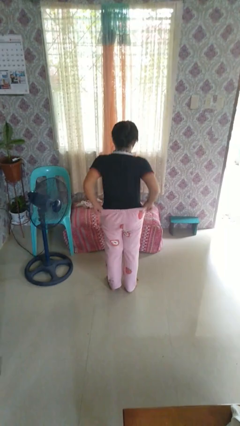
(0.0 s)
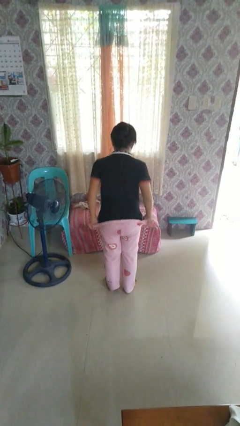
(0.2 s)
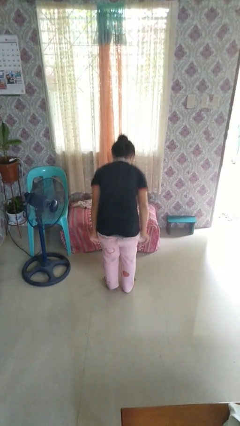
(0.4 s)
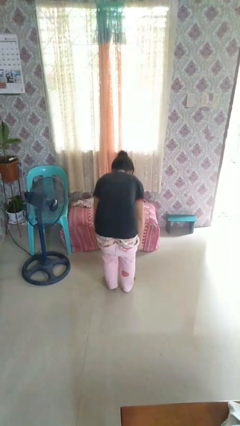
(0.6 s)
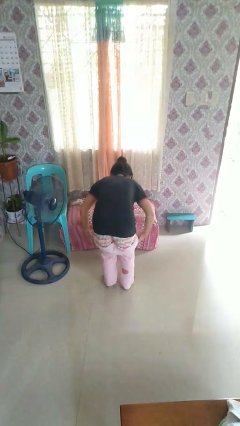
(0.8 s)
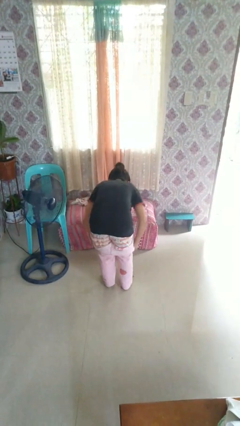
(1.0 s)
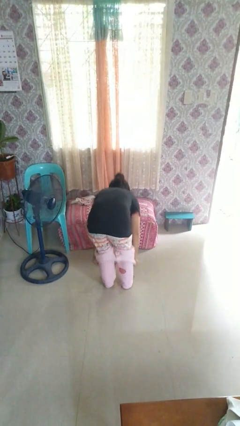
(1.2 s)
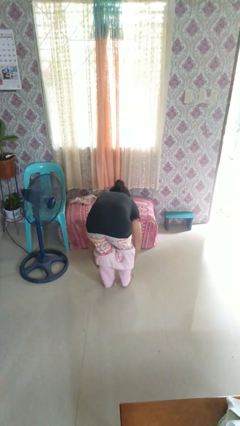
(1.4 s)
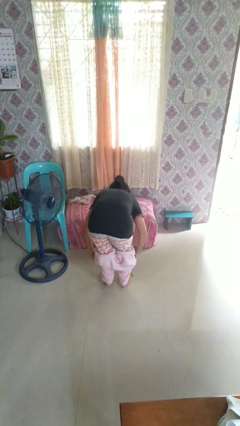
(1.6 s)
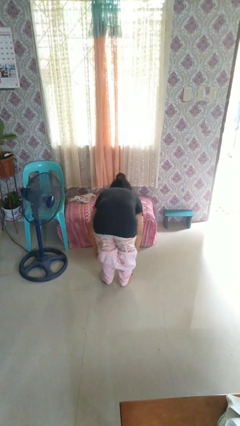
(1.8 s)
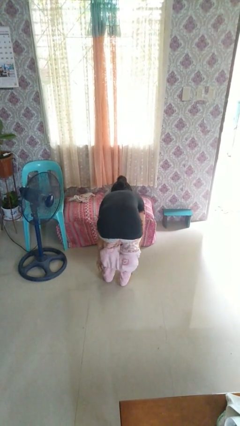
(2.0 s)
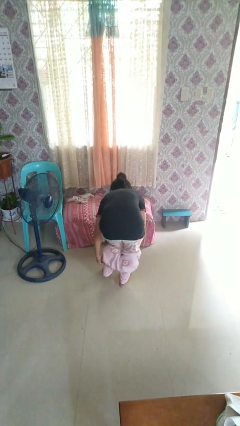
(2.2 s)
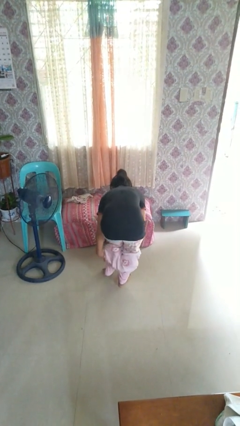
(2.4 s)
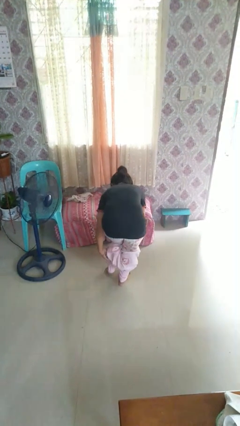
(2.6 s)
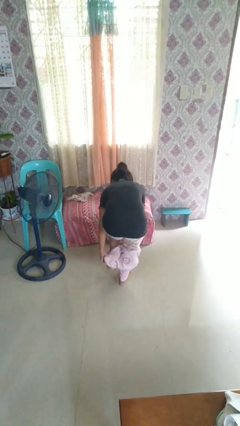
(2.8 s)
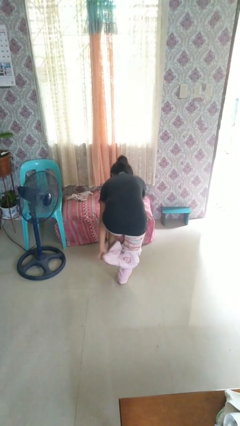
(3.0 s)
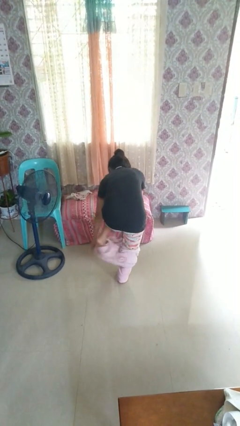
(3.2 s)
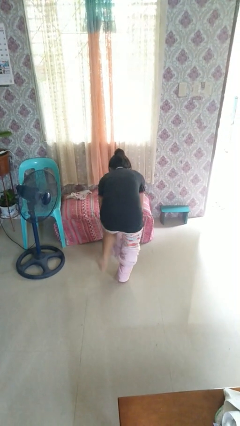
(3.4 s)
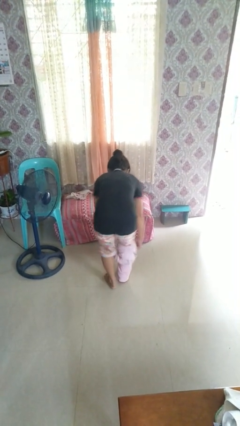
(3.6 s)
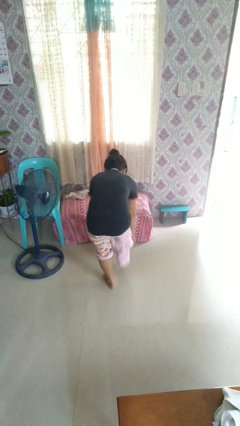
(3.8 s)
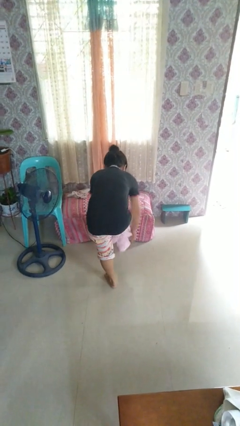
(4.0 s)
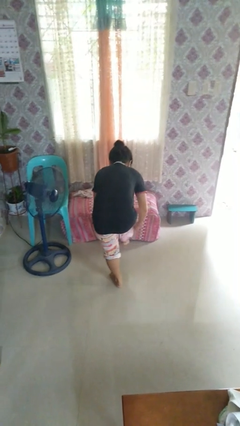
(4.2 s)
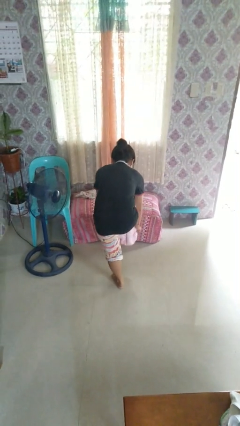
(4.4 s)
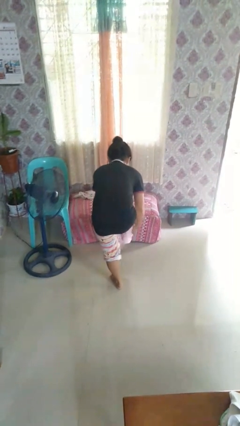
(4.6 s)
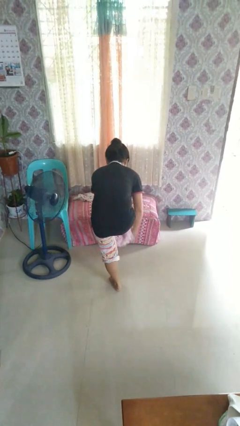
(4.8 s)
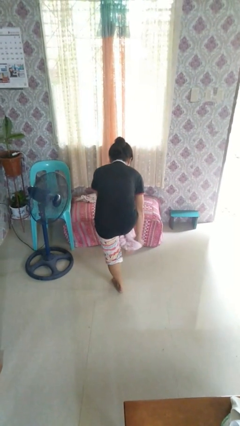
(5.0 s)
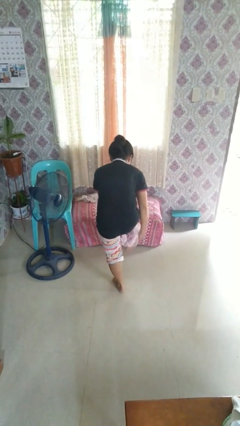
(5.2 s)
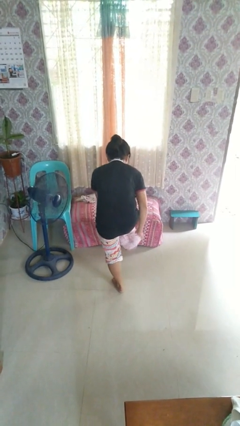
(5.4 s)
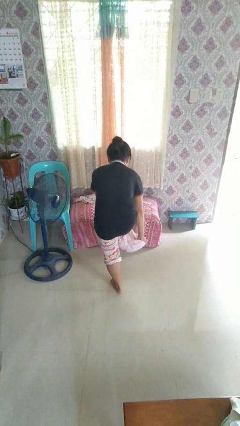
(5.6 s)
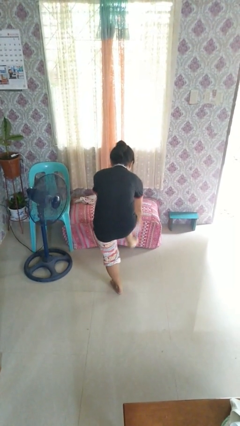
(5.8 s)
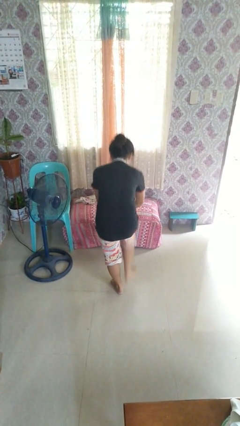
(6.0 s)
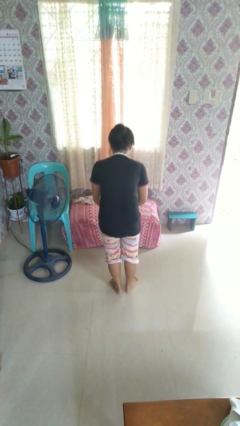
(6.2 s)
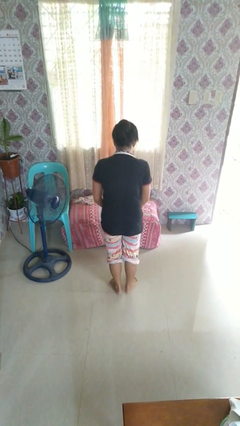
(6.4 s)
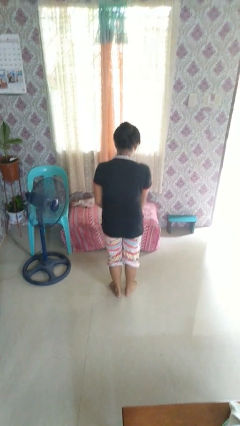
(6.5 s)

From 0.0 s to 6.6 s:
person takes off pants

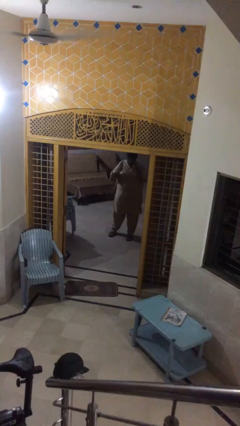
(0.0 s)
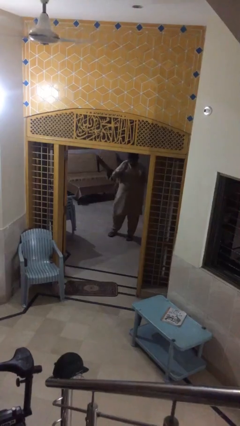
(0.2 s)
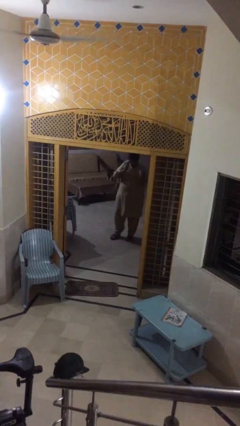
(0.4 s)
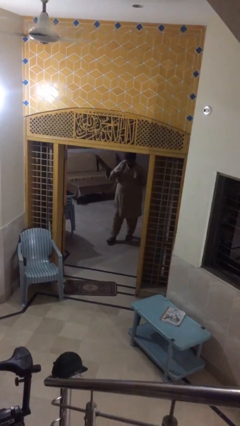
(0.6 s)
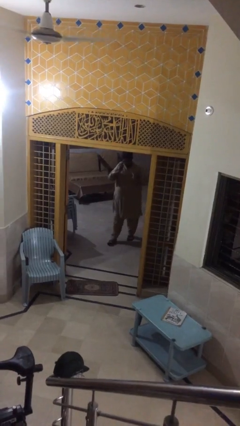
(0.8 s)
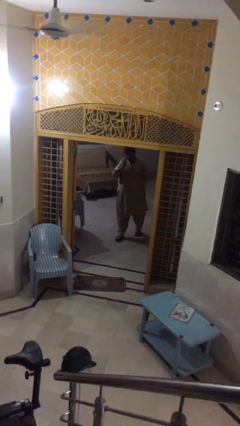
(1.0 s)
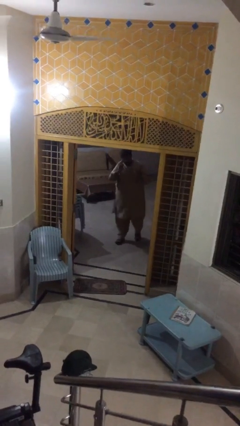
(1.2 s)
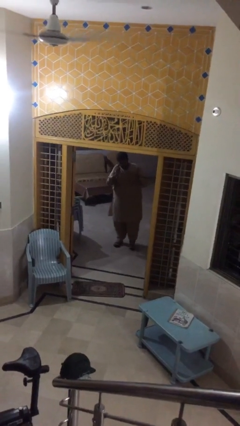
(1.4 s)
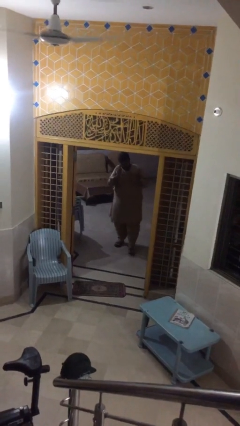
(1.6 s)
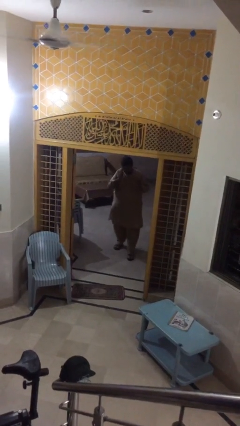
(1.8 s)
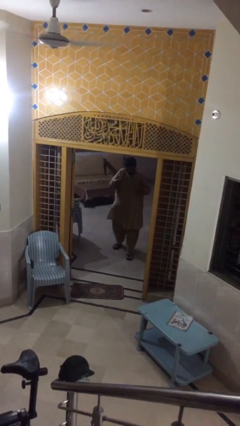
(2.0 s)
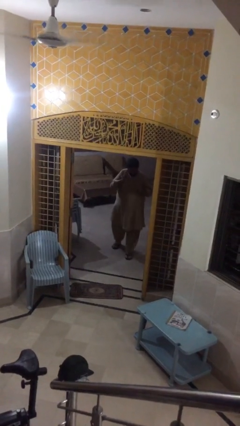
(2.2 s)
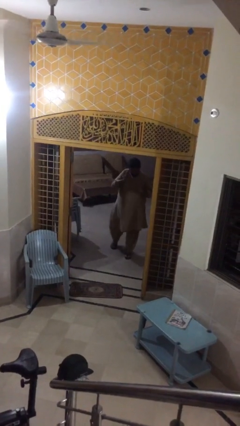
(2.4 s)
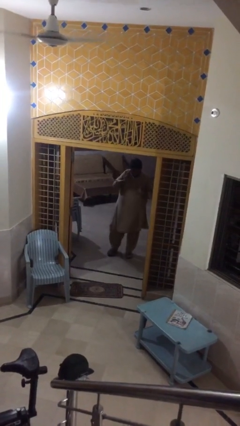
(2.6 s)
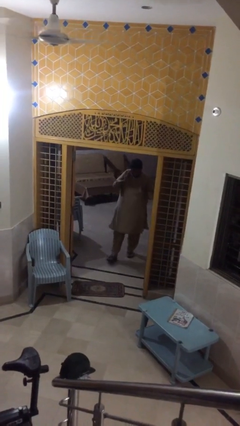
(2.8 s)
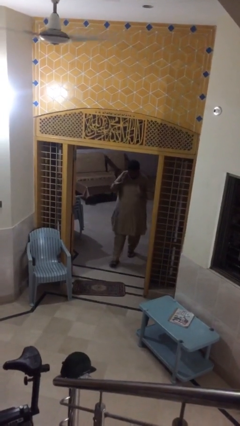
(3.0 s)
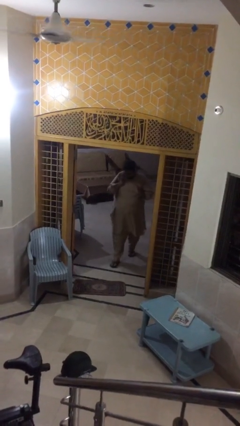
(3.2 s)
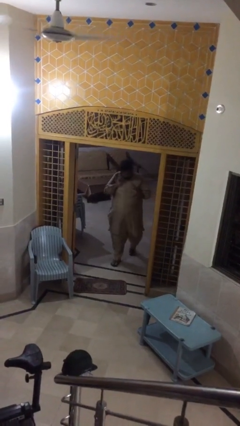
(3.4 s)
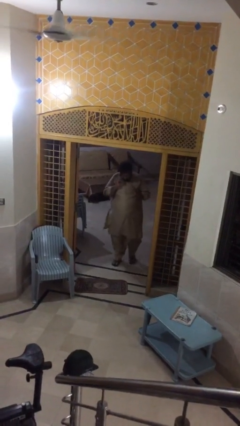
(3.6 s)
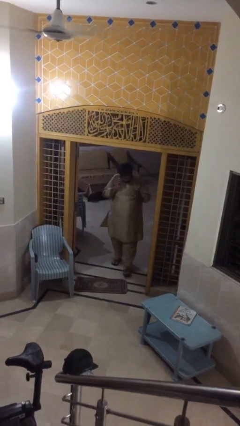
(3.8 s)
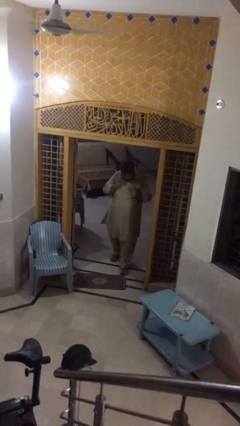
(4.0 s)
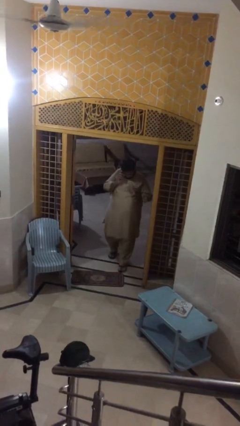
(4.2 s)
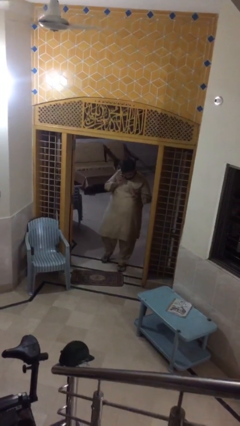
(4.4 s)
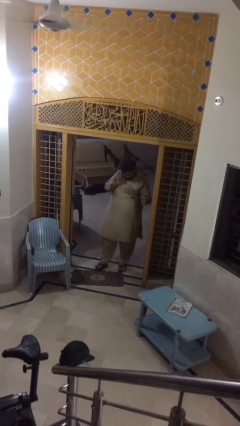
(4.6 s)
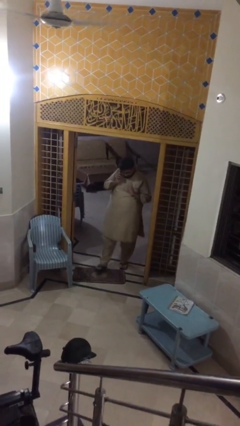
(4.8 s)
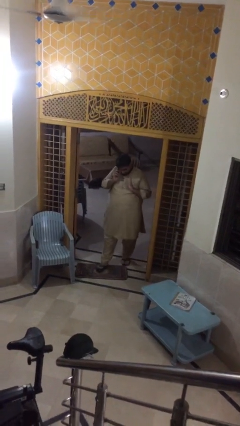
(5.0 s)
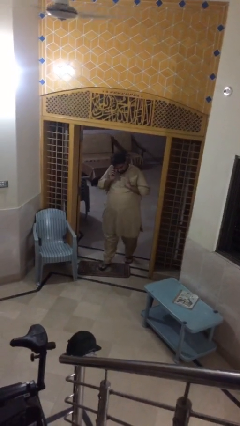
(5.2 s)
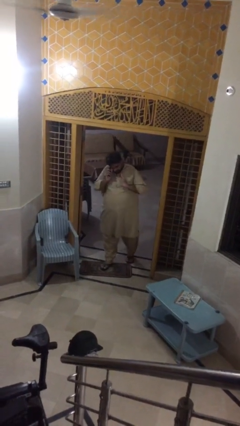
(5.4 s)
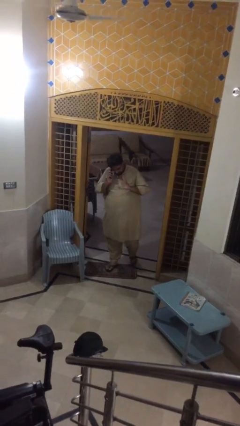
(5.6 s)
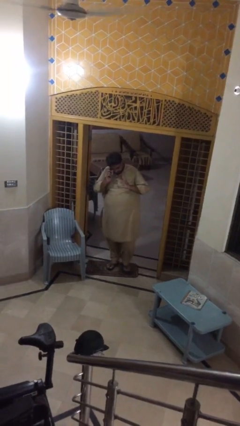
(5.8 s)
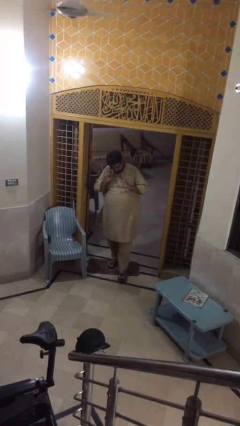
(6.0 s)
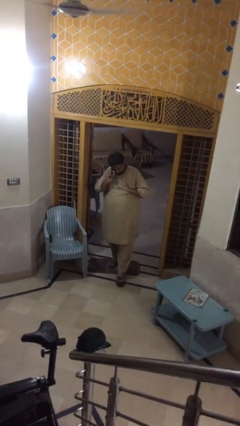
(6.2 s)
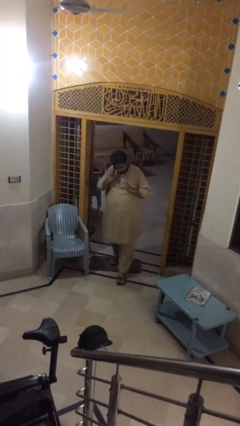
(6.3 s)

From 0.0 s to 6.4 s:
person enters scene through structure

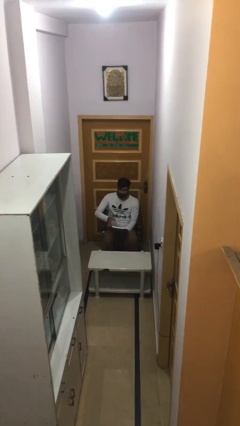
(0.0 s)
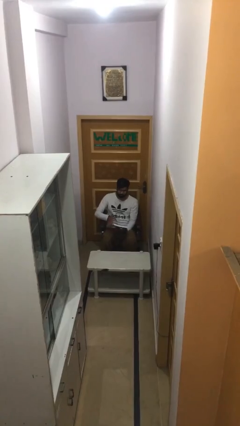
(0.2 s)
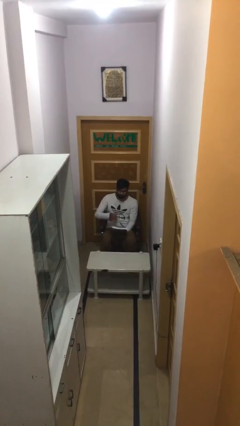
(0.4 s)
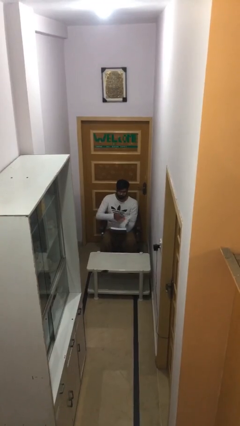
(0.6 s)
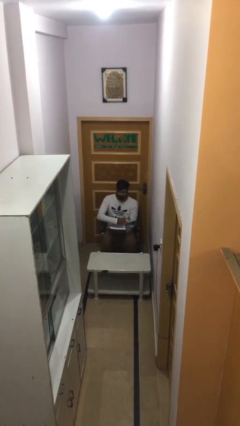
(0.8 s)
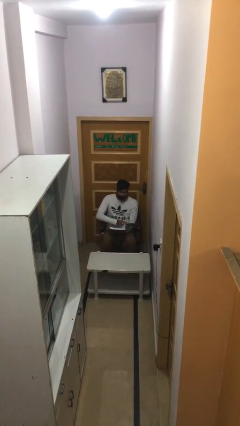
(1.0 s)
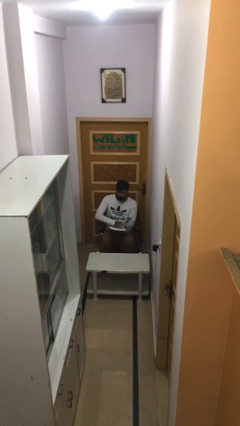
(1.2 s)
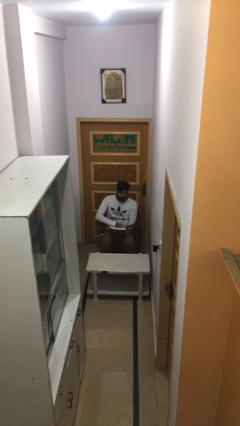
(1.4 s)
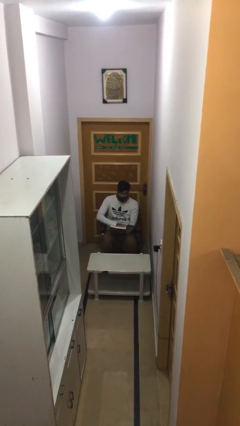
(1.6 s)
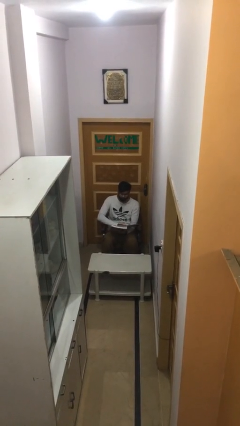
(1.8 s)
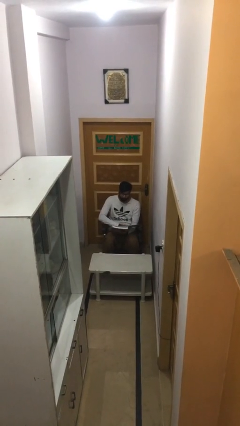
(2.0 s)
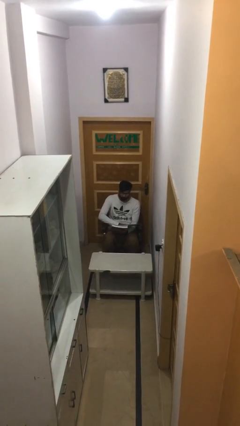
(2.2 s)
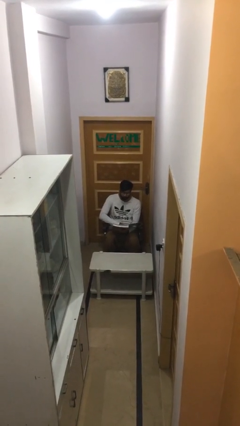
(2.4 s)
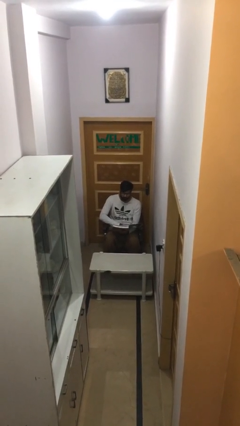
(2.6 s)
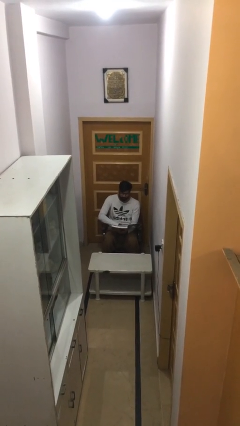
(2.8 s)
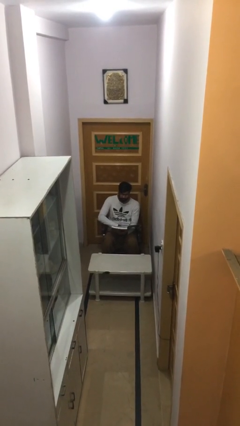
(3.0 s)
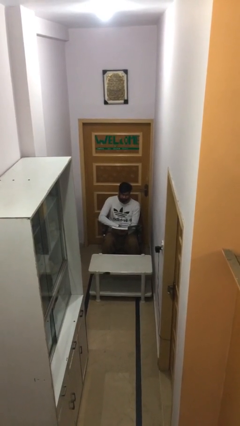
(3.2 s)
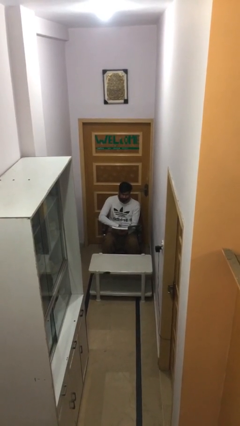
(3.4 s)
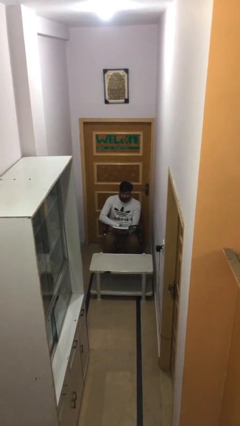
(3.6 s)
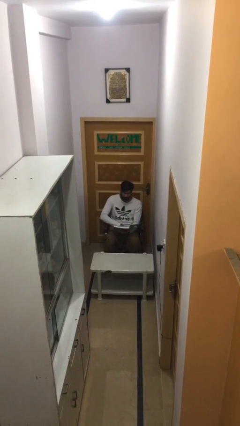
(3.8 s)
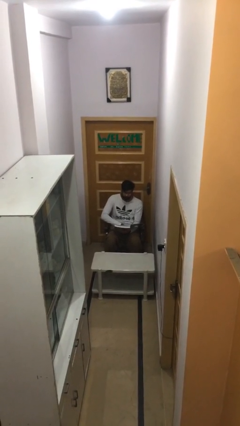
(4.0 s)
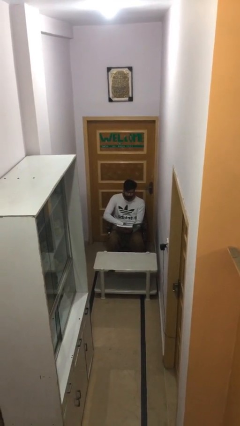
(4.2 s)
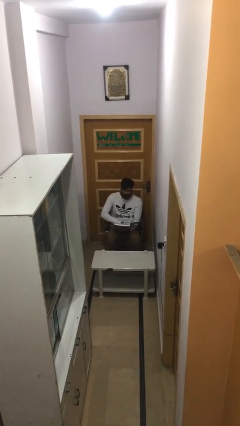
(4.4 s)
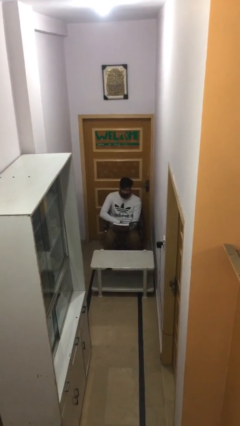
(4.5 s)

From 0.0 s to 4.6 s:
person reads document

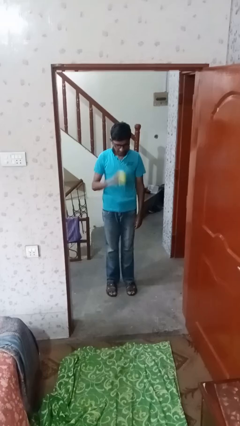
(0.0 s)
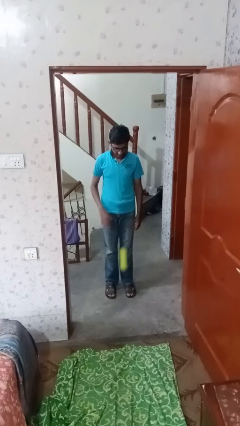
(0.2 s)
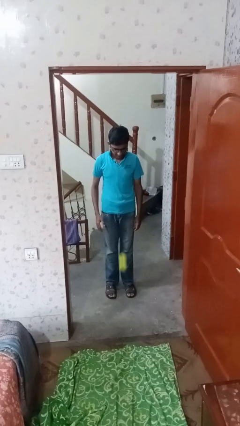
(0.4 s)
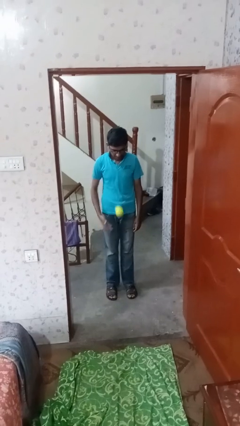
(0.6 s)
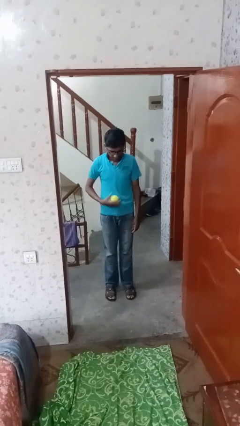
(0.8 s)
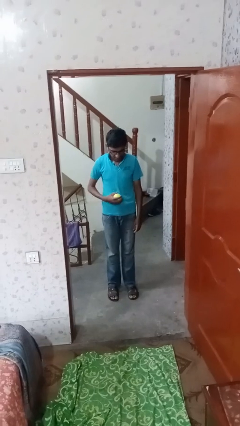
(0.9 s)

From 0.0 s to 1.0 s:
person bounces ball on floor
